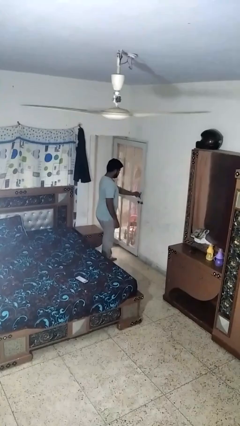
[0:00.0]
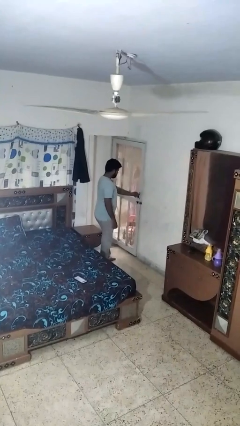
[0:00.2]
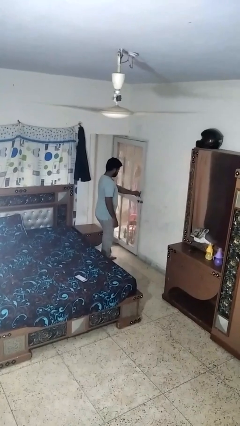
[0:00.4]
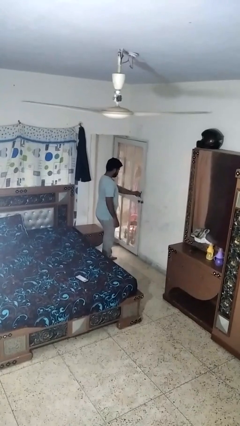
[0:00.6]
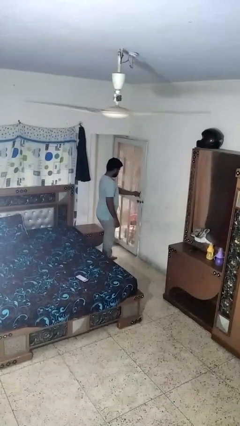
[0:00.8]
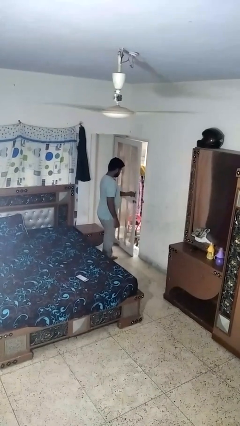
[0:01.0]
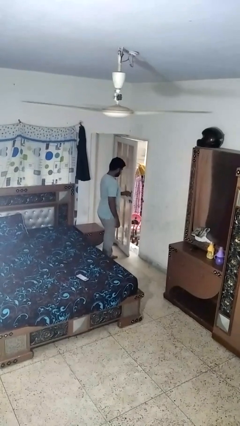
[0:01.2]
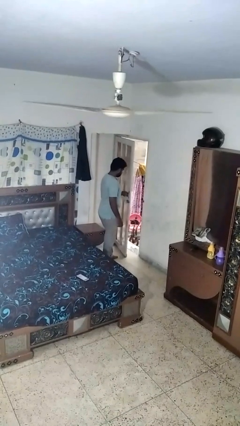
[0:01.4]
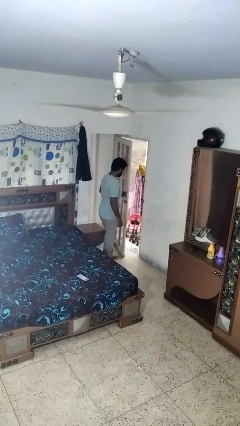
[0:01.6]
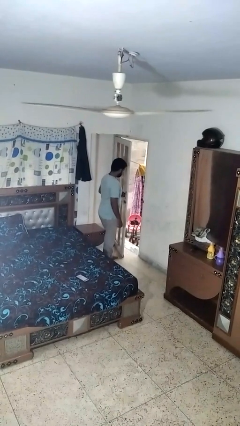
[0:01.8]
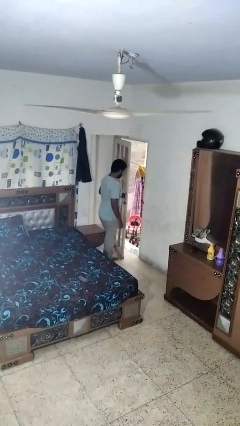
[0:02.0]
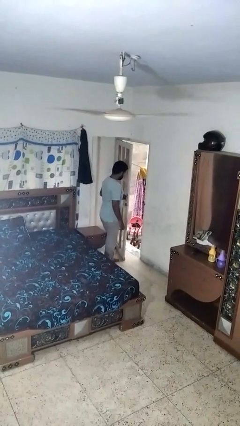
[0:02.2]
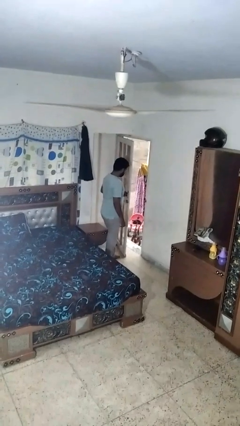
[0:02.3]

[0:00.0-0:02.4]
person opens facility door

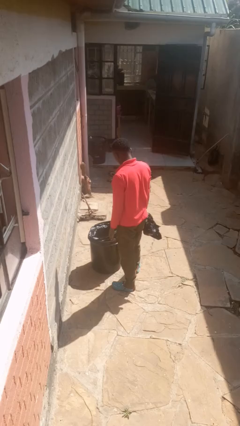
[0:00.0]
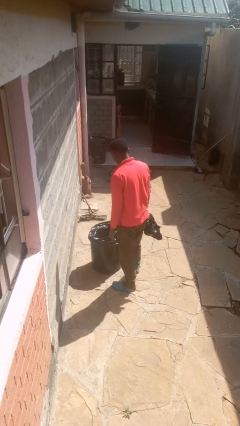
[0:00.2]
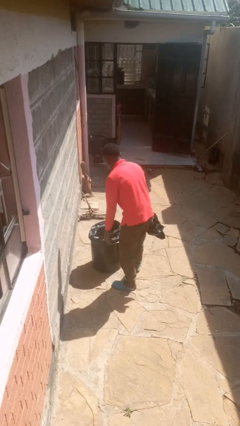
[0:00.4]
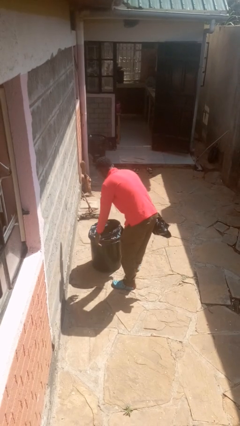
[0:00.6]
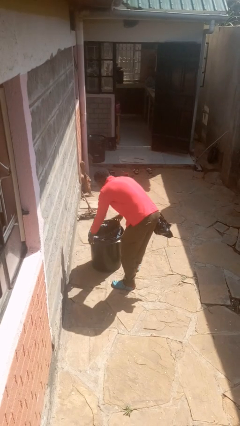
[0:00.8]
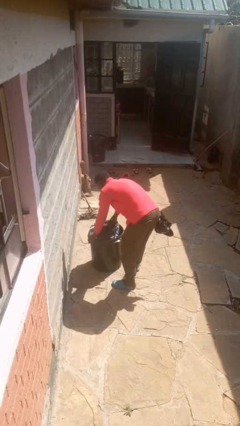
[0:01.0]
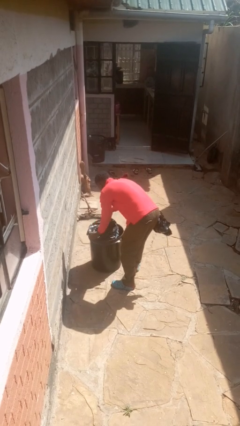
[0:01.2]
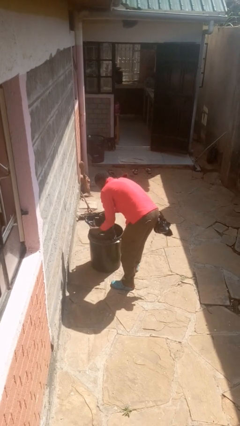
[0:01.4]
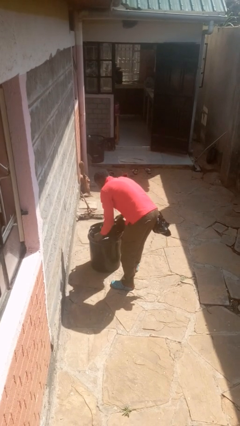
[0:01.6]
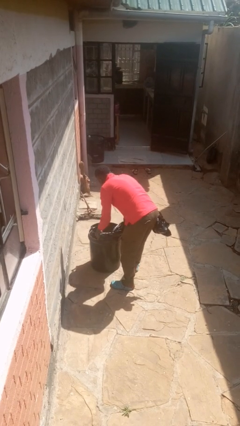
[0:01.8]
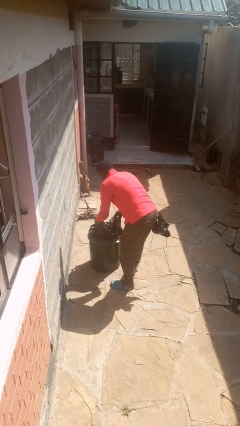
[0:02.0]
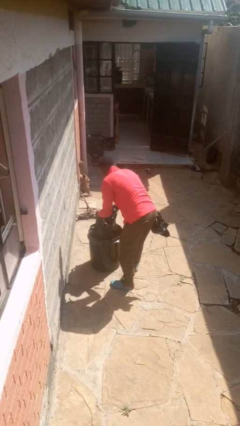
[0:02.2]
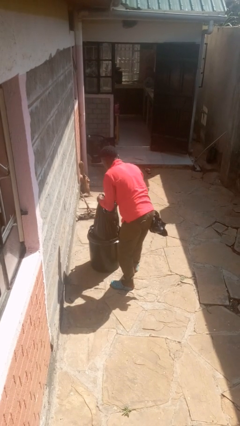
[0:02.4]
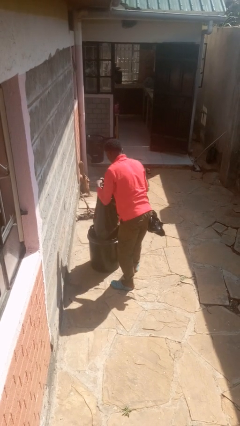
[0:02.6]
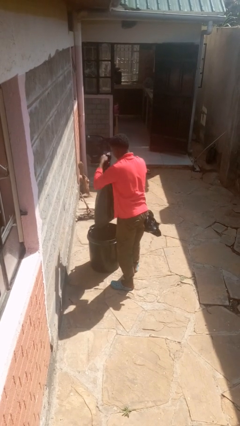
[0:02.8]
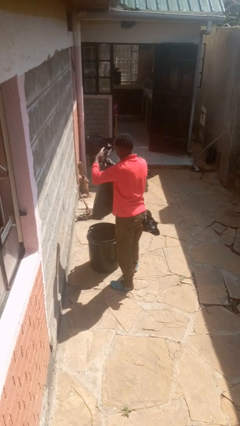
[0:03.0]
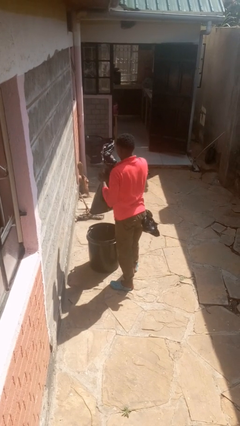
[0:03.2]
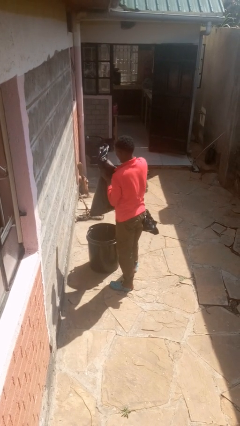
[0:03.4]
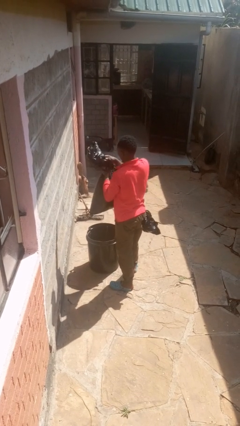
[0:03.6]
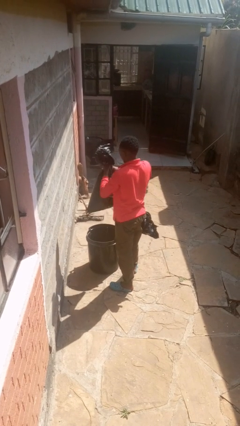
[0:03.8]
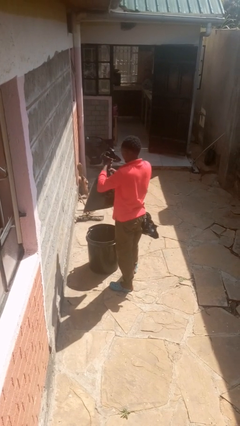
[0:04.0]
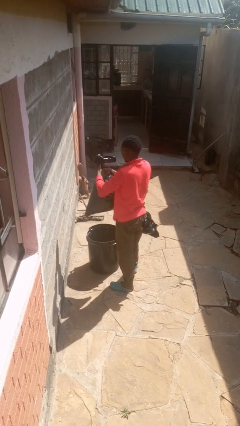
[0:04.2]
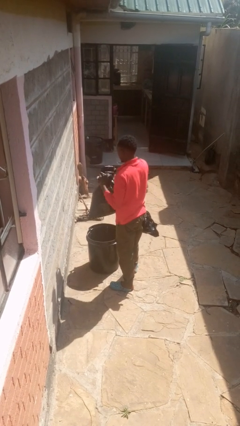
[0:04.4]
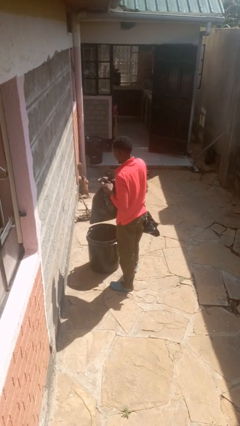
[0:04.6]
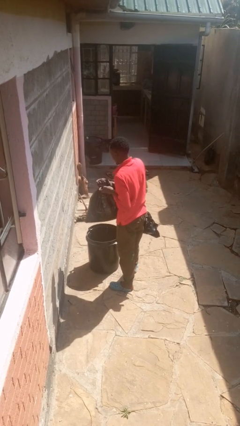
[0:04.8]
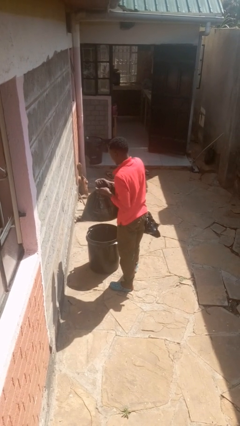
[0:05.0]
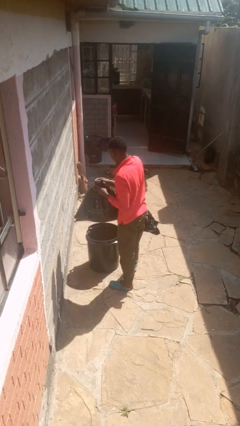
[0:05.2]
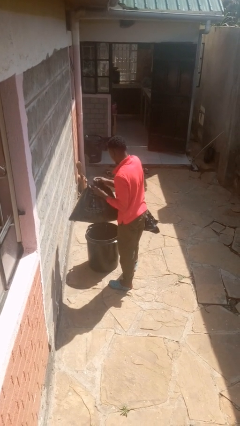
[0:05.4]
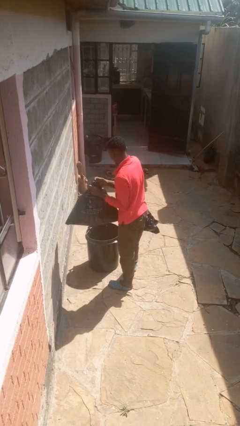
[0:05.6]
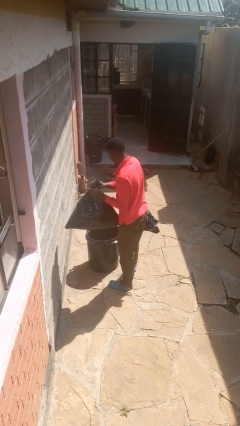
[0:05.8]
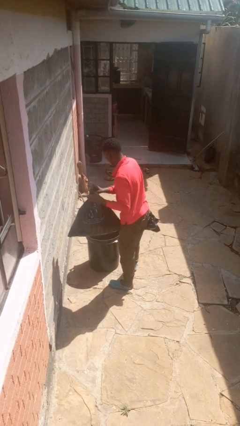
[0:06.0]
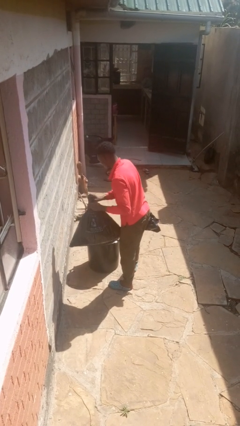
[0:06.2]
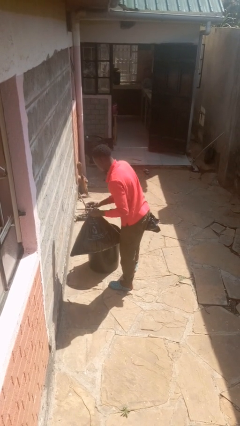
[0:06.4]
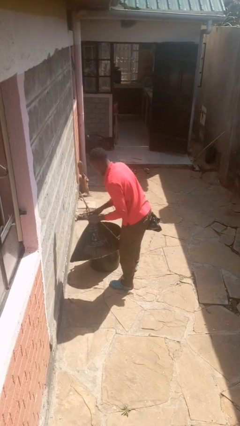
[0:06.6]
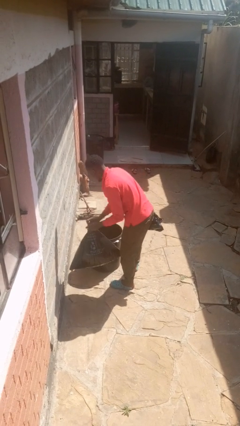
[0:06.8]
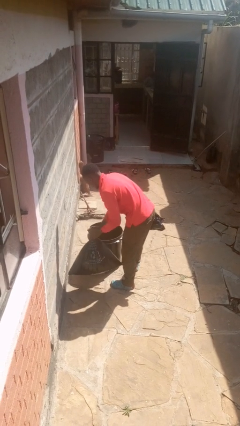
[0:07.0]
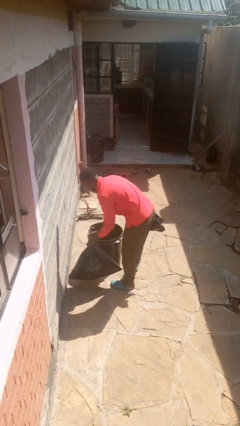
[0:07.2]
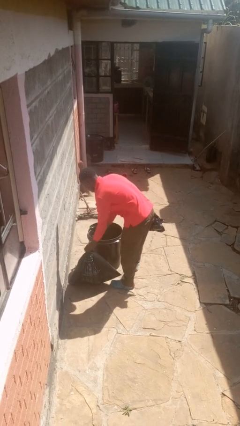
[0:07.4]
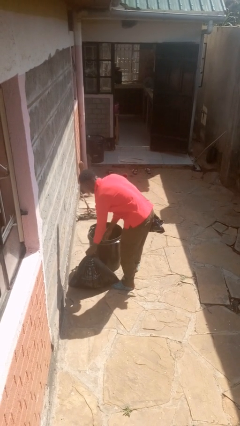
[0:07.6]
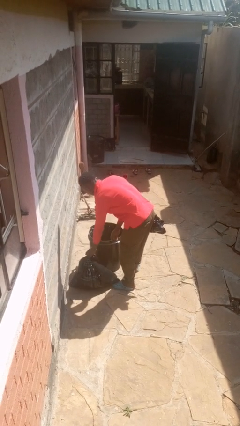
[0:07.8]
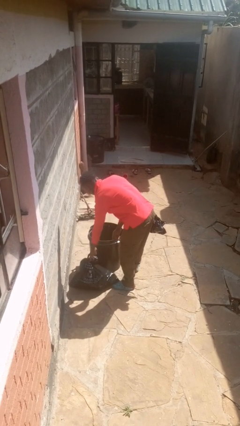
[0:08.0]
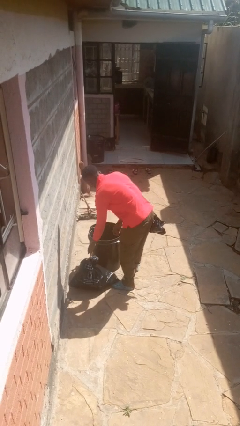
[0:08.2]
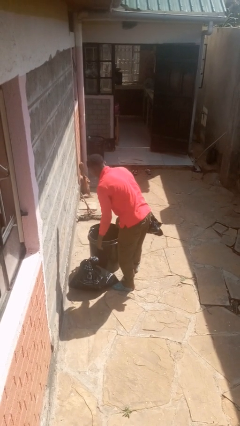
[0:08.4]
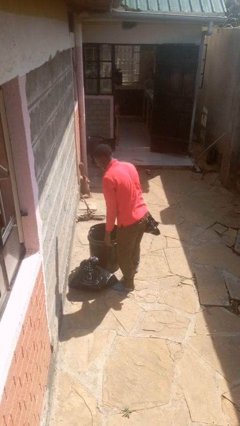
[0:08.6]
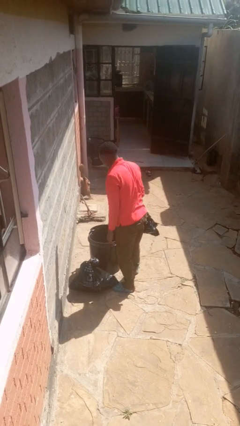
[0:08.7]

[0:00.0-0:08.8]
person removes trashbag from trashcan

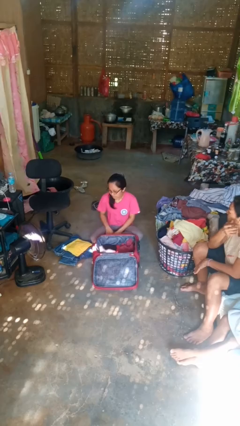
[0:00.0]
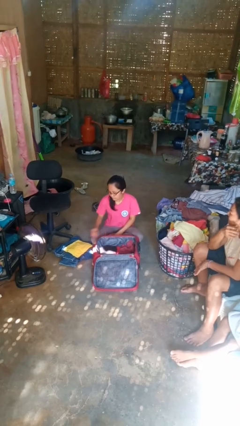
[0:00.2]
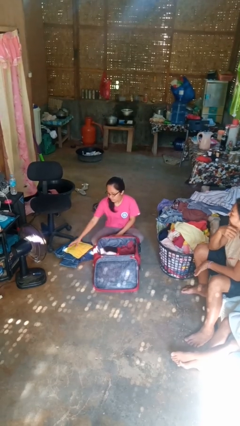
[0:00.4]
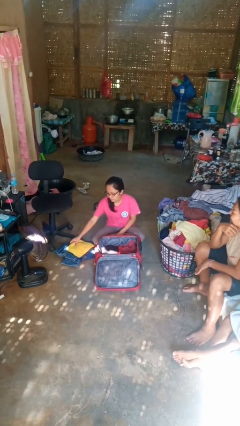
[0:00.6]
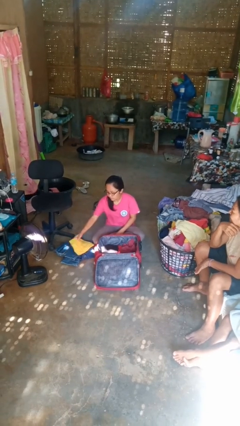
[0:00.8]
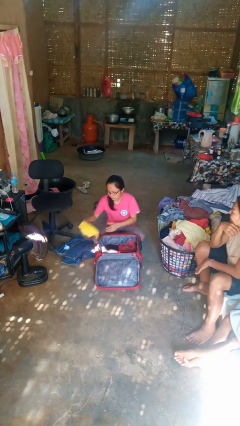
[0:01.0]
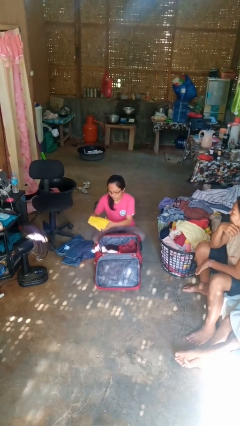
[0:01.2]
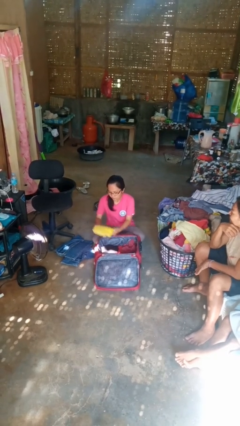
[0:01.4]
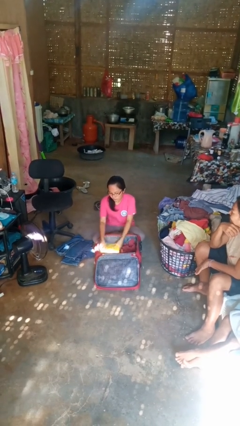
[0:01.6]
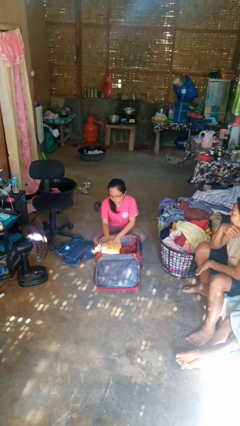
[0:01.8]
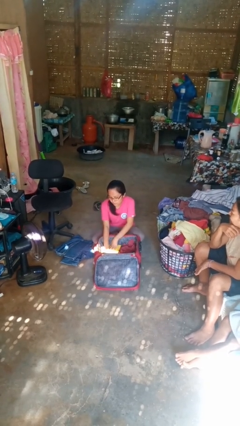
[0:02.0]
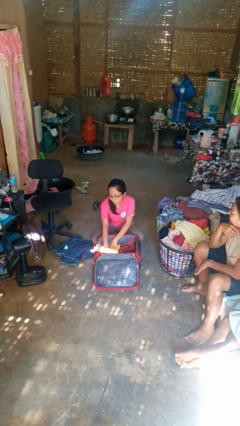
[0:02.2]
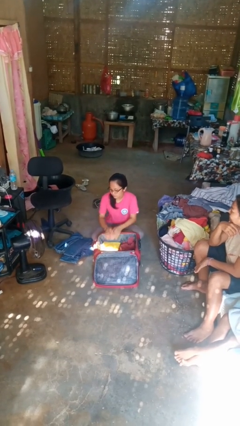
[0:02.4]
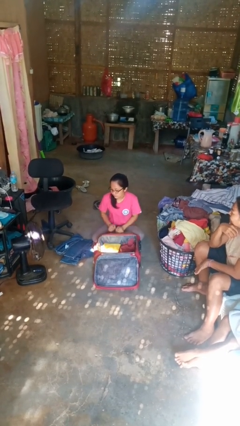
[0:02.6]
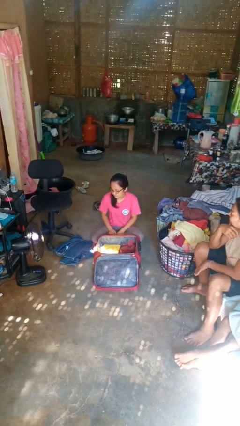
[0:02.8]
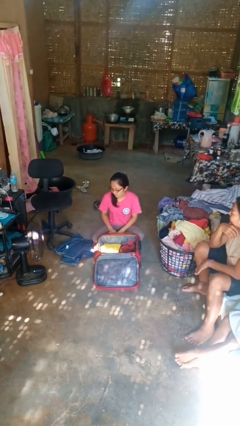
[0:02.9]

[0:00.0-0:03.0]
person loads clothes into suitcase

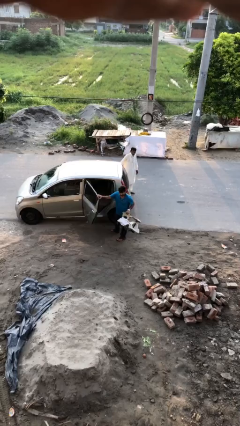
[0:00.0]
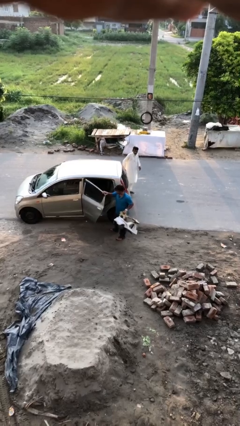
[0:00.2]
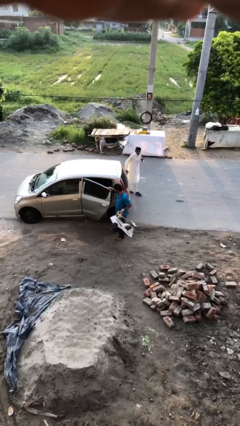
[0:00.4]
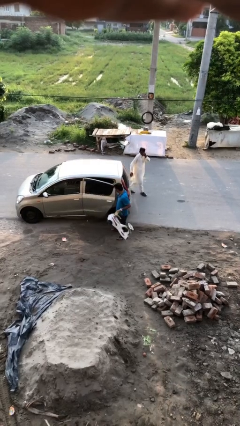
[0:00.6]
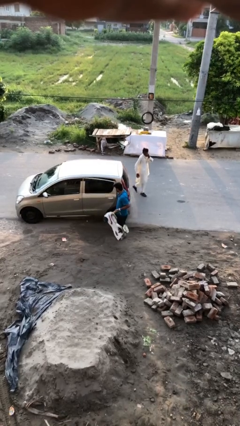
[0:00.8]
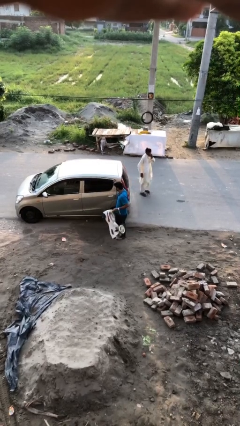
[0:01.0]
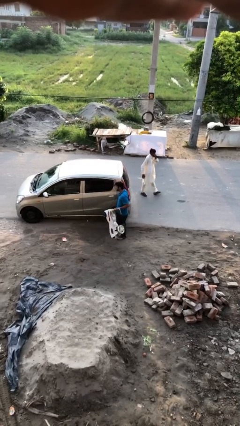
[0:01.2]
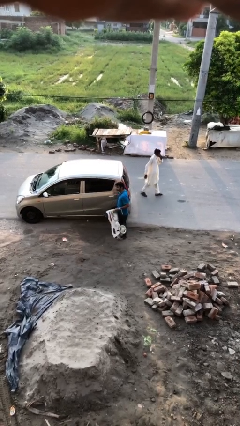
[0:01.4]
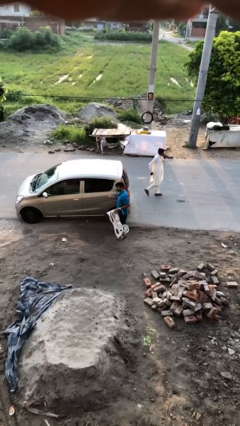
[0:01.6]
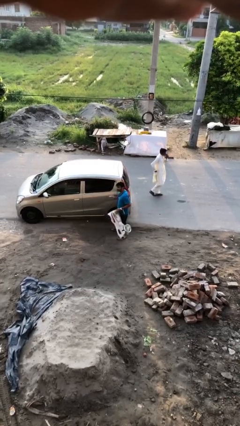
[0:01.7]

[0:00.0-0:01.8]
person closes car door

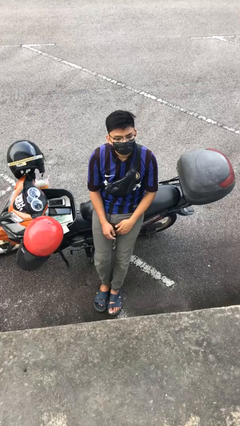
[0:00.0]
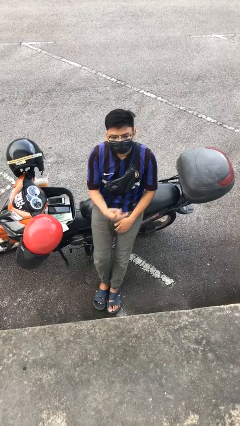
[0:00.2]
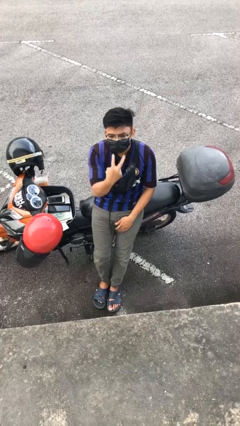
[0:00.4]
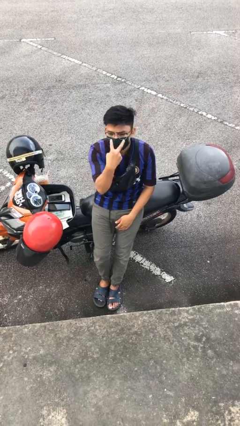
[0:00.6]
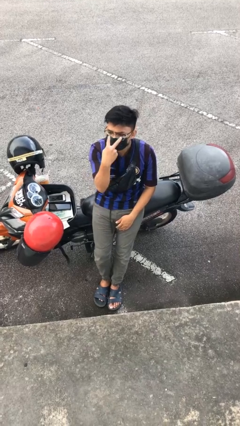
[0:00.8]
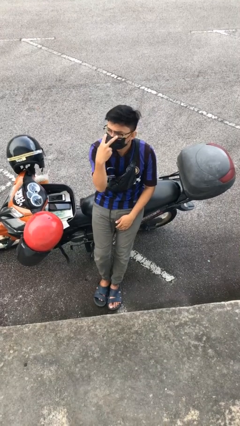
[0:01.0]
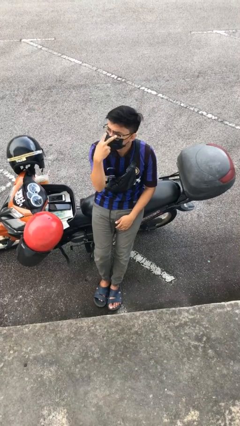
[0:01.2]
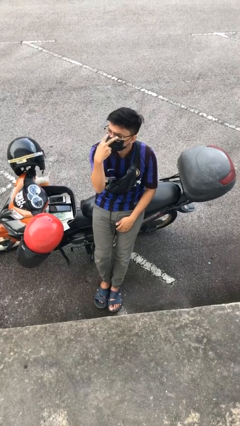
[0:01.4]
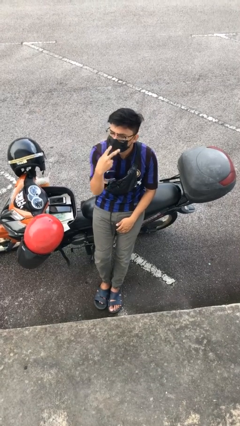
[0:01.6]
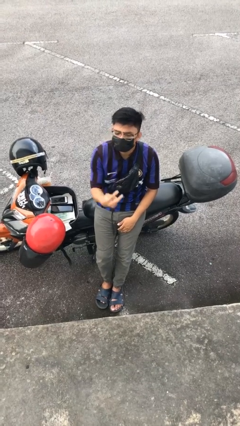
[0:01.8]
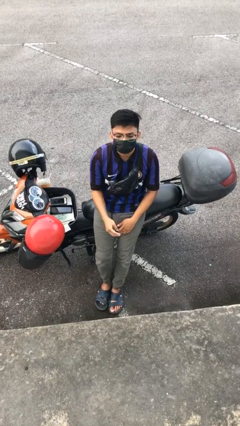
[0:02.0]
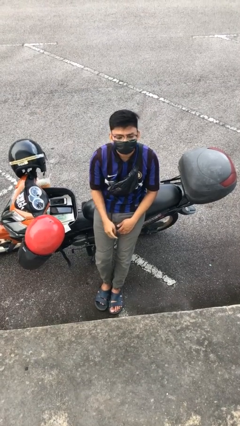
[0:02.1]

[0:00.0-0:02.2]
person gestures watch closely
